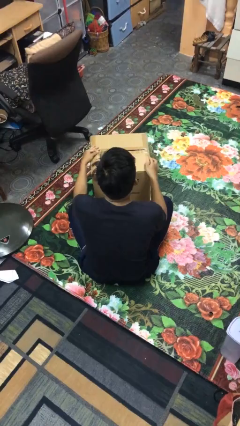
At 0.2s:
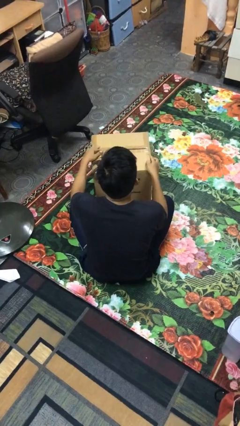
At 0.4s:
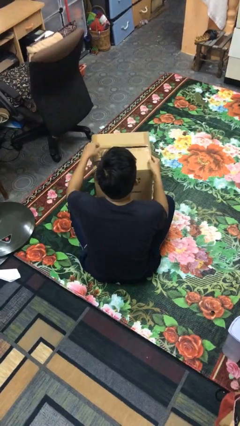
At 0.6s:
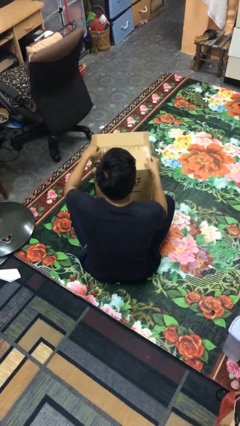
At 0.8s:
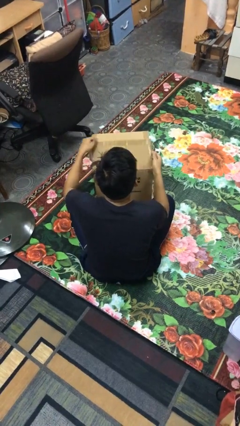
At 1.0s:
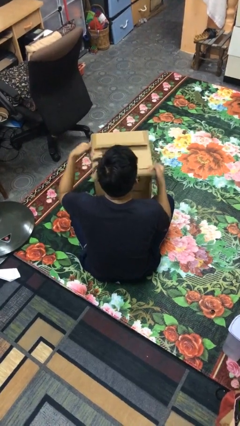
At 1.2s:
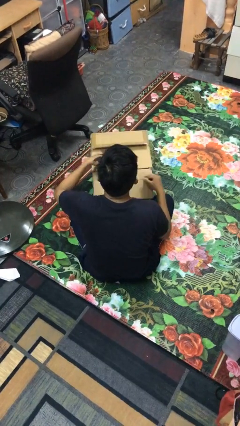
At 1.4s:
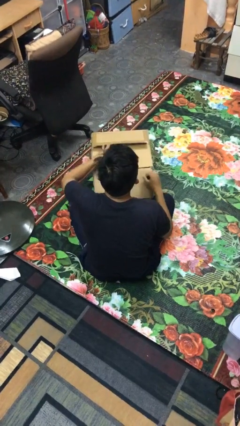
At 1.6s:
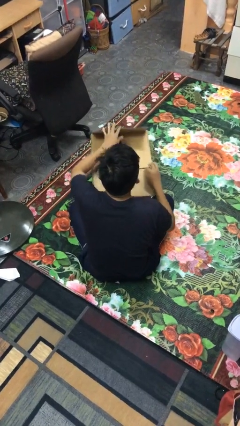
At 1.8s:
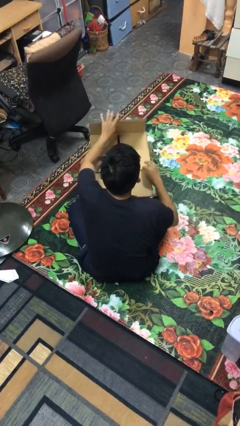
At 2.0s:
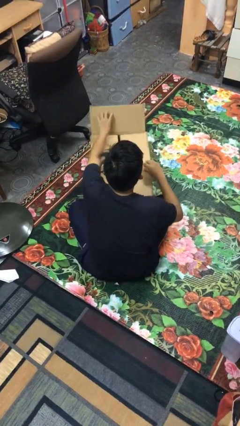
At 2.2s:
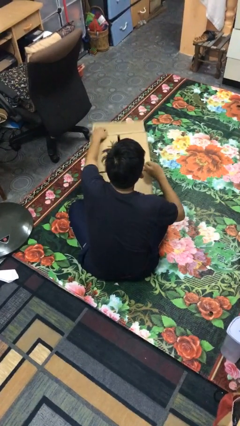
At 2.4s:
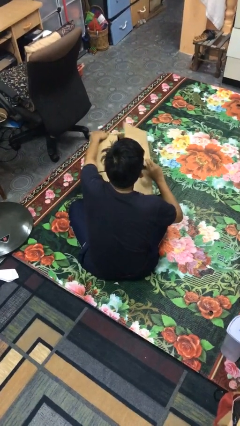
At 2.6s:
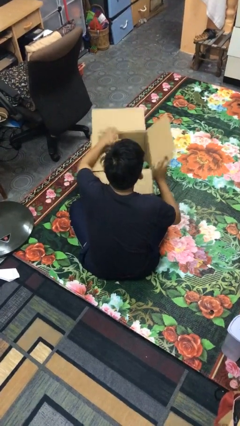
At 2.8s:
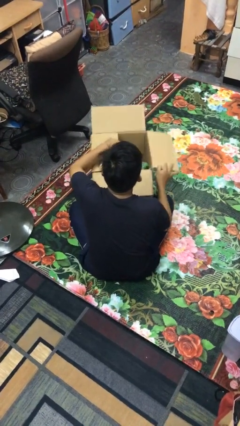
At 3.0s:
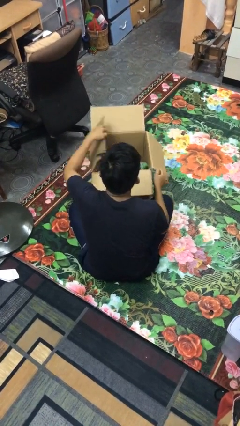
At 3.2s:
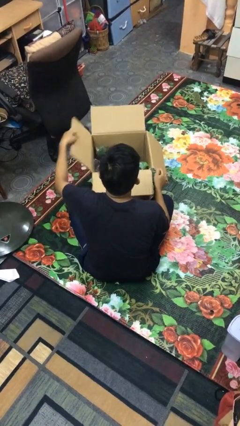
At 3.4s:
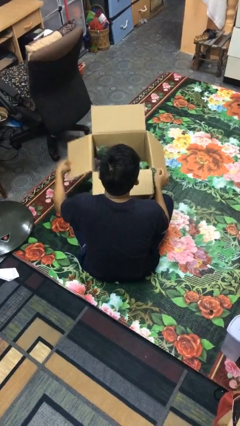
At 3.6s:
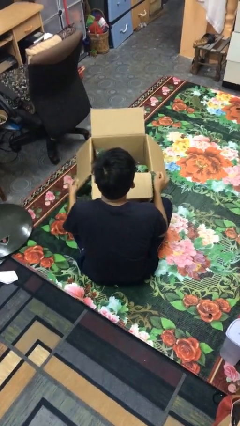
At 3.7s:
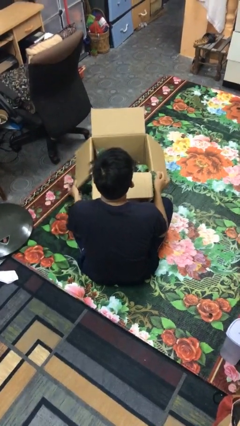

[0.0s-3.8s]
person opens box

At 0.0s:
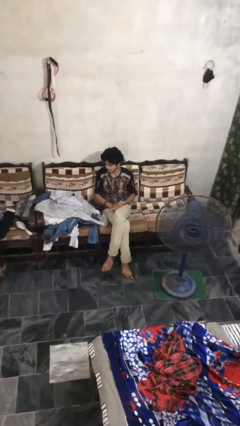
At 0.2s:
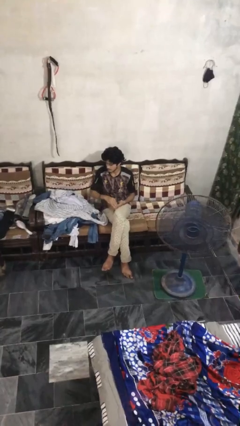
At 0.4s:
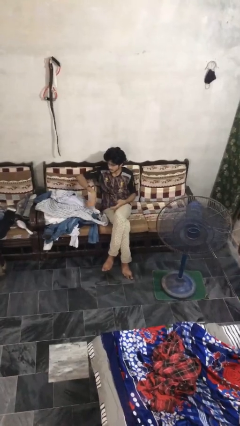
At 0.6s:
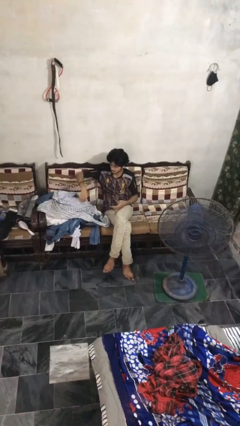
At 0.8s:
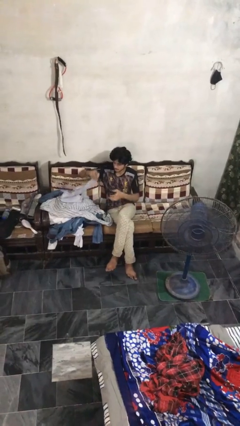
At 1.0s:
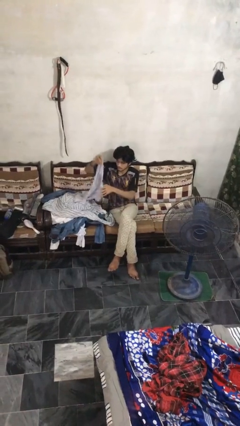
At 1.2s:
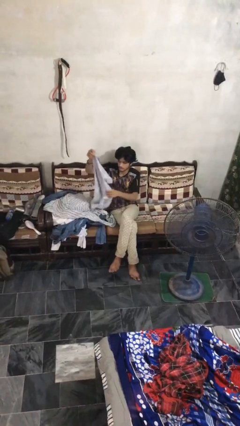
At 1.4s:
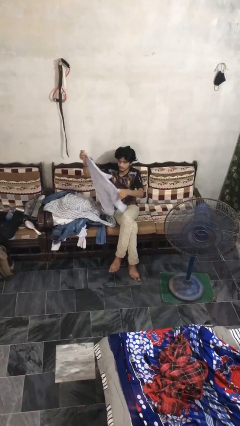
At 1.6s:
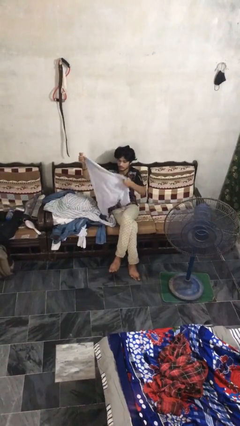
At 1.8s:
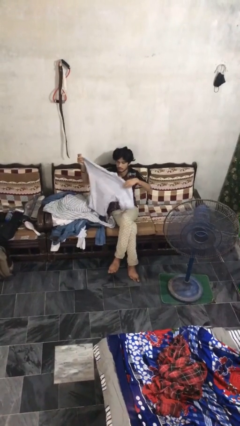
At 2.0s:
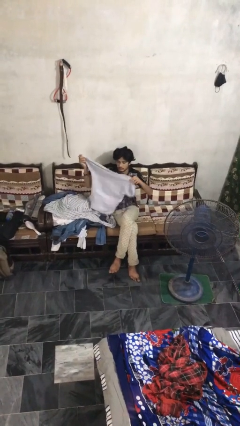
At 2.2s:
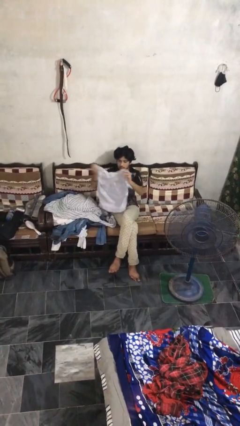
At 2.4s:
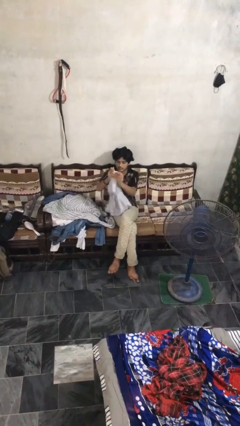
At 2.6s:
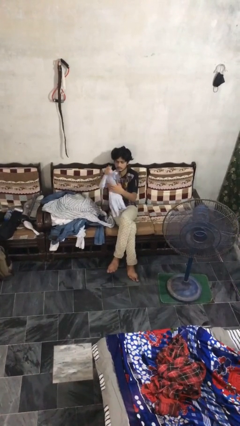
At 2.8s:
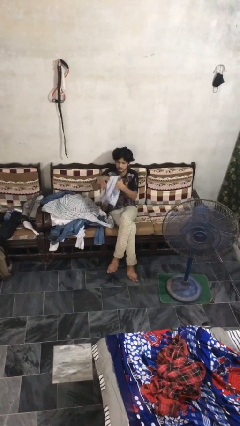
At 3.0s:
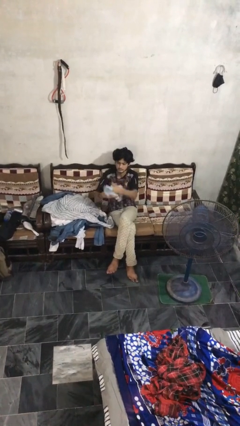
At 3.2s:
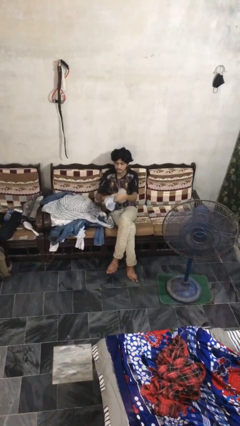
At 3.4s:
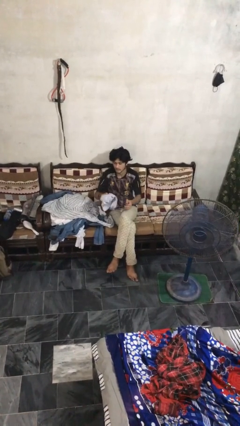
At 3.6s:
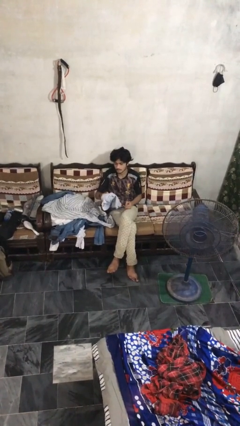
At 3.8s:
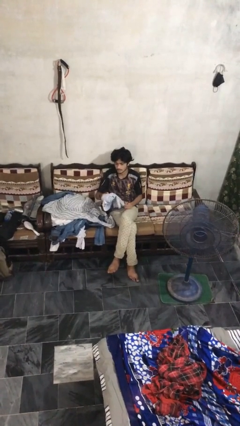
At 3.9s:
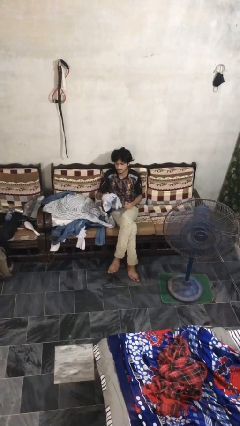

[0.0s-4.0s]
person folds shirt

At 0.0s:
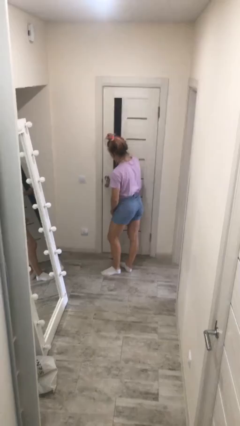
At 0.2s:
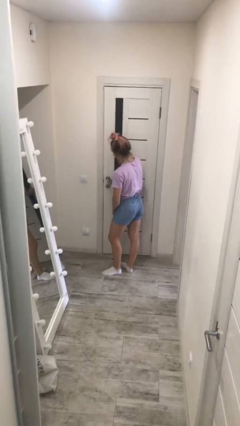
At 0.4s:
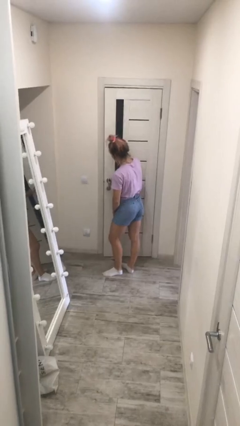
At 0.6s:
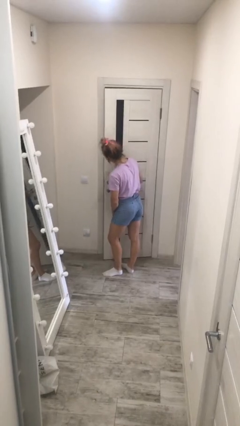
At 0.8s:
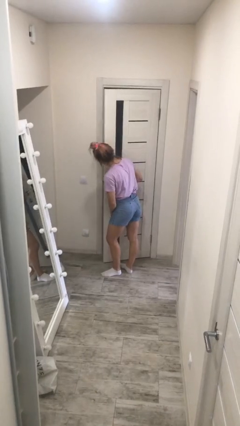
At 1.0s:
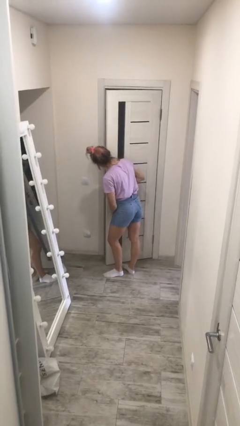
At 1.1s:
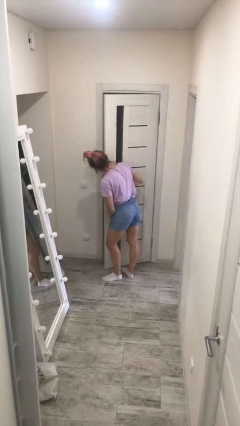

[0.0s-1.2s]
person opens facility door

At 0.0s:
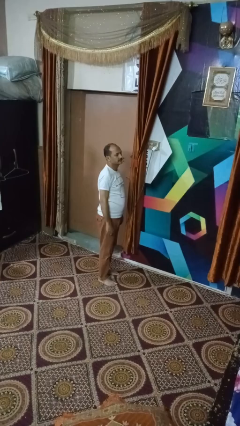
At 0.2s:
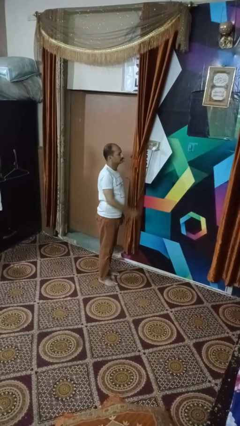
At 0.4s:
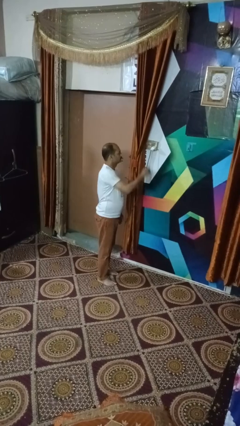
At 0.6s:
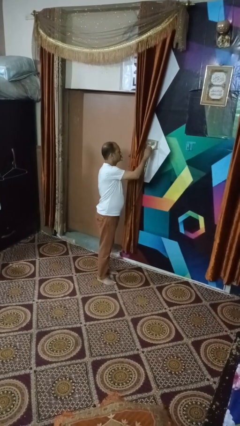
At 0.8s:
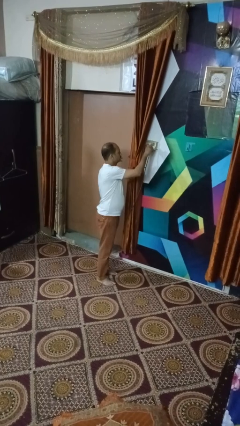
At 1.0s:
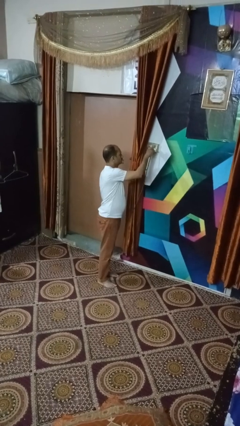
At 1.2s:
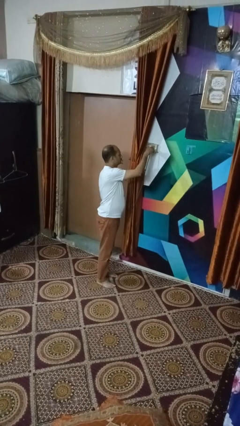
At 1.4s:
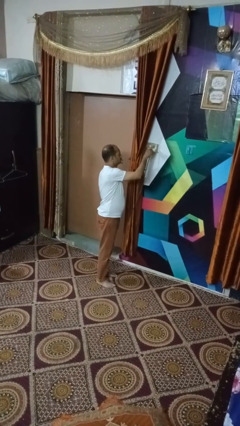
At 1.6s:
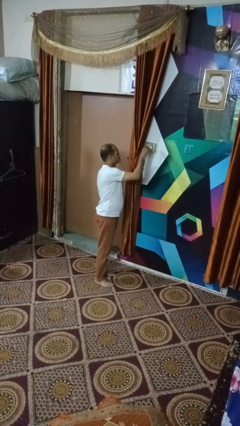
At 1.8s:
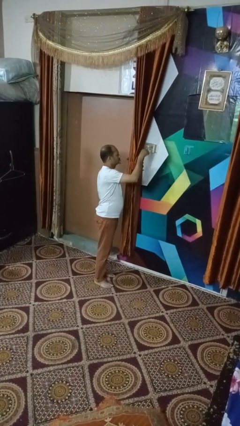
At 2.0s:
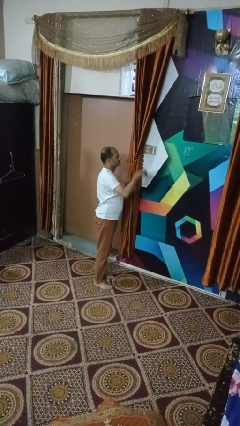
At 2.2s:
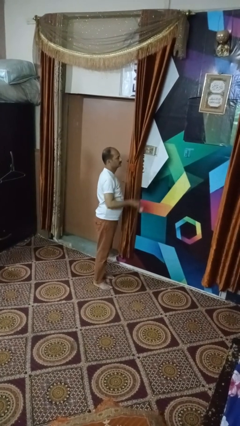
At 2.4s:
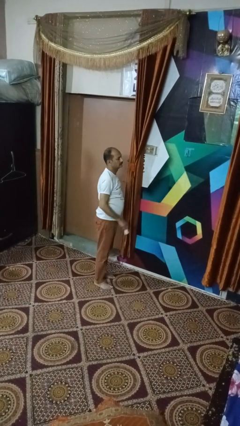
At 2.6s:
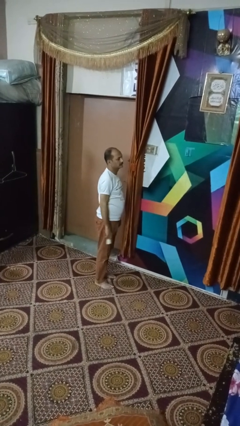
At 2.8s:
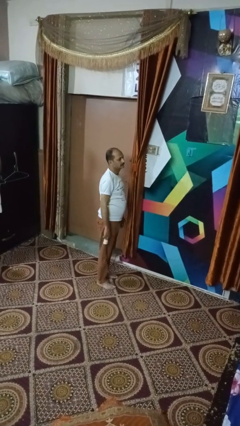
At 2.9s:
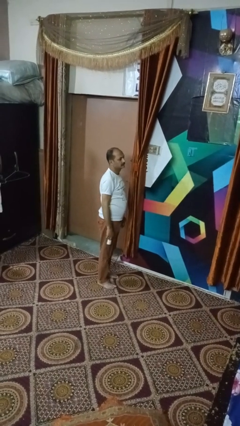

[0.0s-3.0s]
person unplugs from electrical socket

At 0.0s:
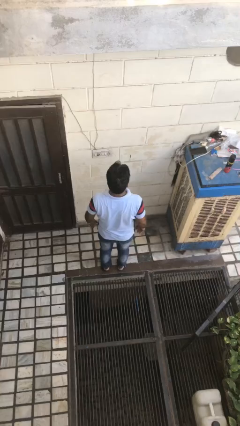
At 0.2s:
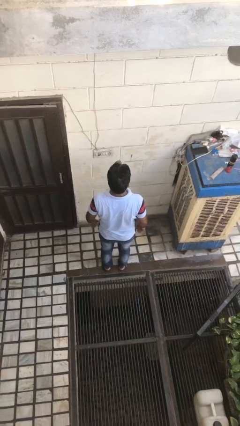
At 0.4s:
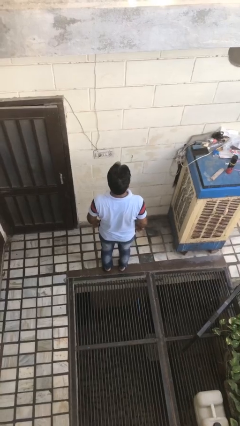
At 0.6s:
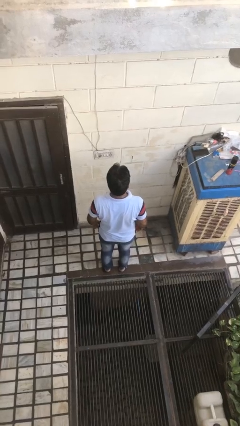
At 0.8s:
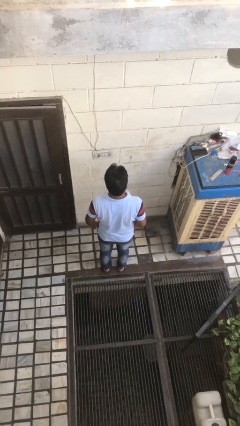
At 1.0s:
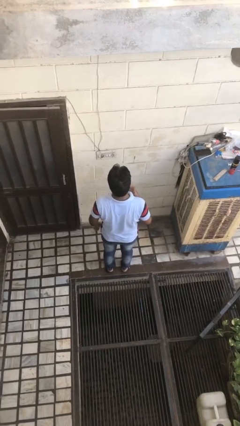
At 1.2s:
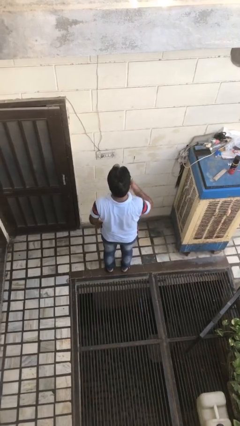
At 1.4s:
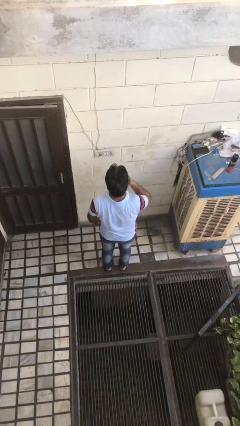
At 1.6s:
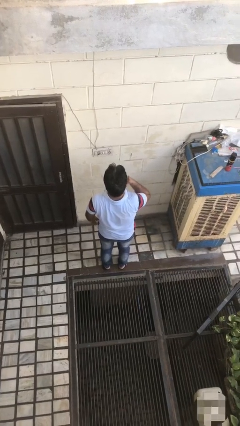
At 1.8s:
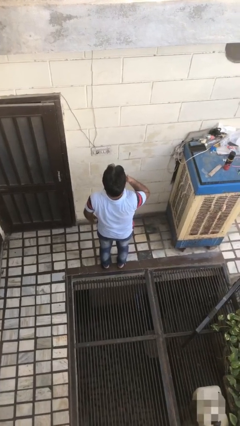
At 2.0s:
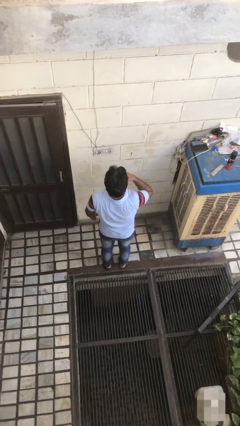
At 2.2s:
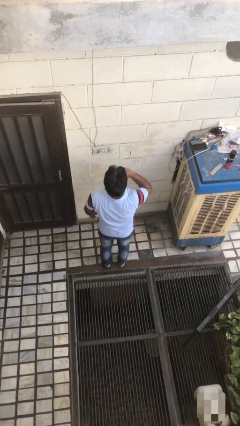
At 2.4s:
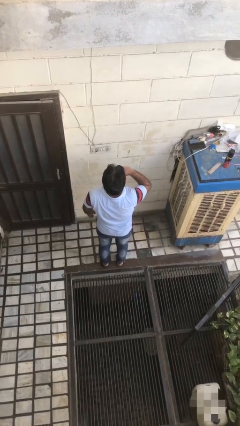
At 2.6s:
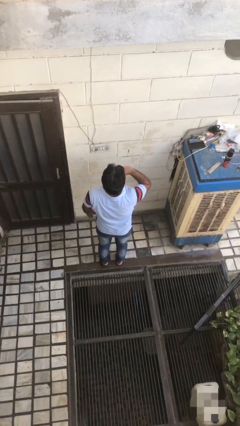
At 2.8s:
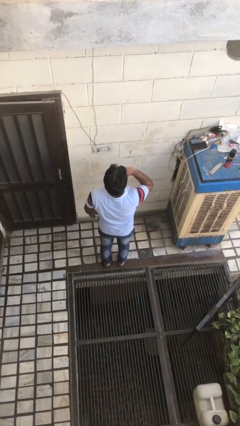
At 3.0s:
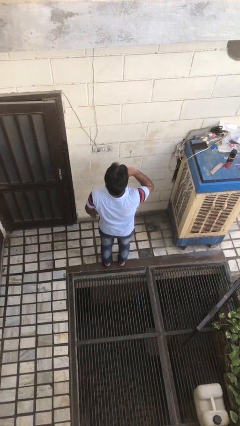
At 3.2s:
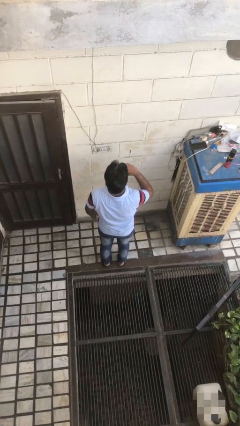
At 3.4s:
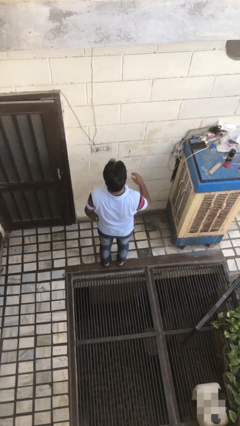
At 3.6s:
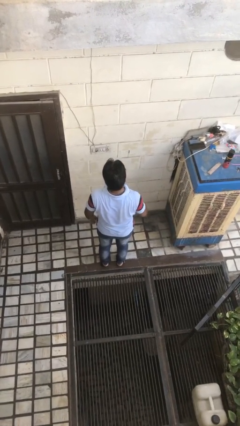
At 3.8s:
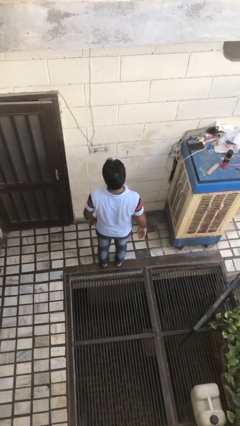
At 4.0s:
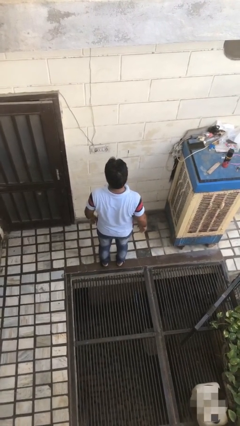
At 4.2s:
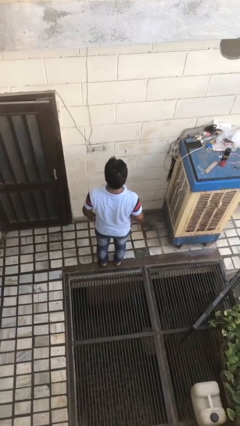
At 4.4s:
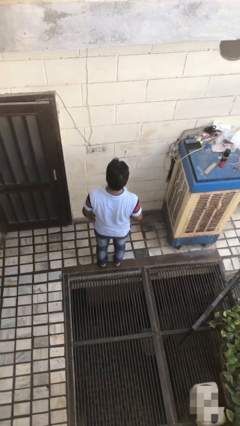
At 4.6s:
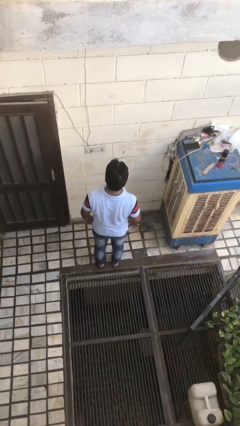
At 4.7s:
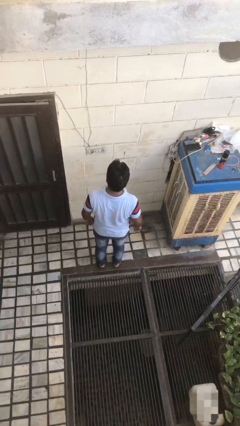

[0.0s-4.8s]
person yawns

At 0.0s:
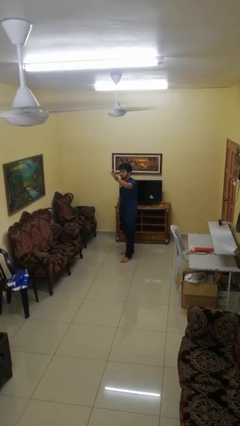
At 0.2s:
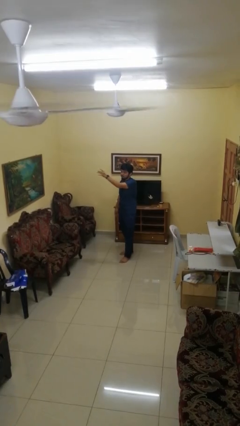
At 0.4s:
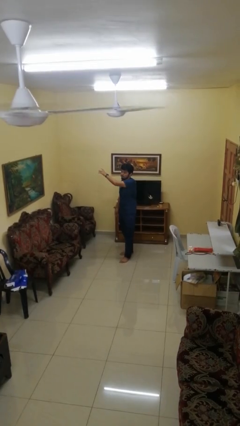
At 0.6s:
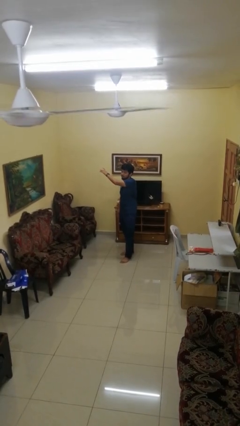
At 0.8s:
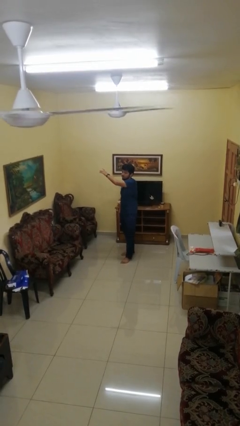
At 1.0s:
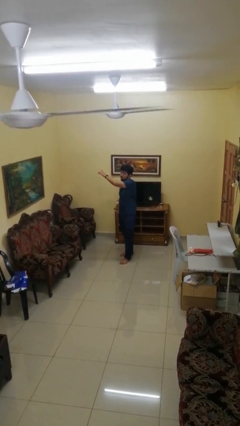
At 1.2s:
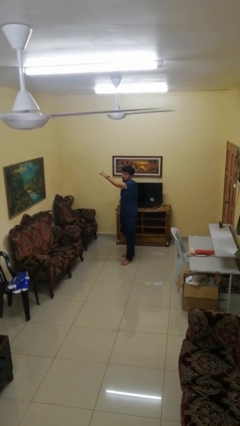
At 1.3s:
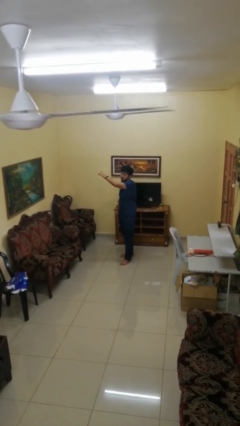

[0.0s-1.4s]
person gestures swipe right
